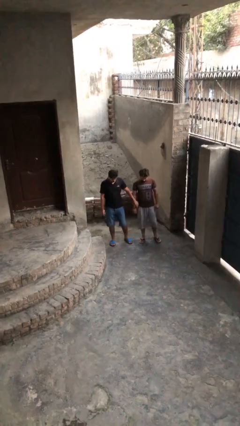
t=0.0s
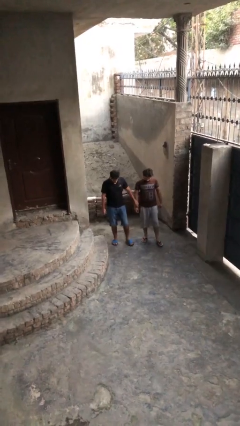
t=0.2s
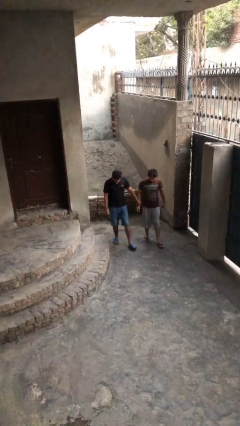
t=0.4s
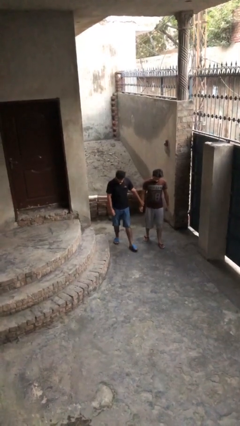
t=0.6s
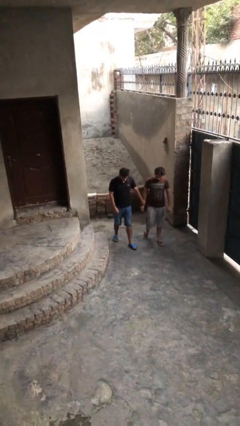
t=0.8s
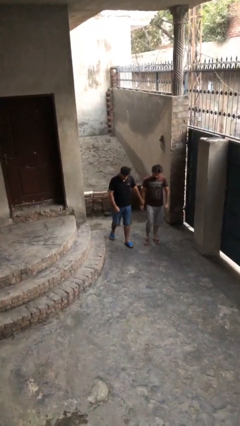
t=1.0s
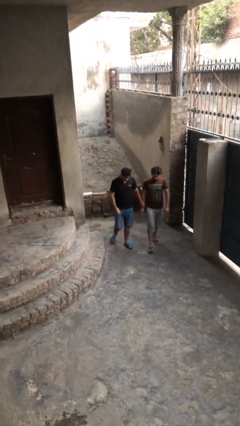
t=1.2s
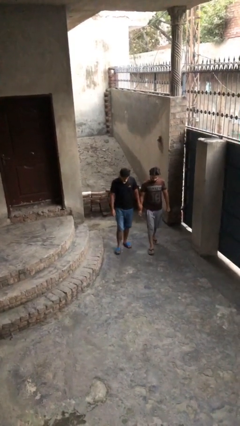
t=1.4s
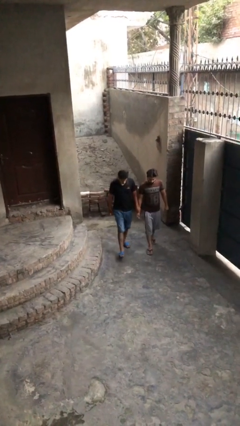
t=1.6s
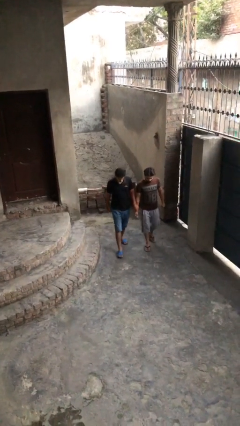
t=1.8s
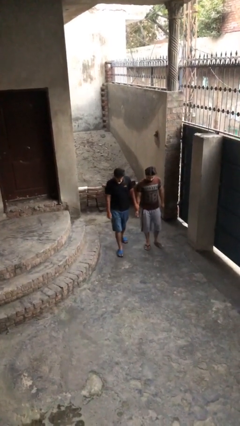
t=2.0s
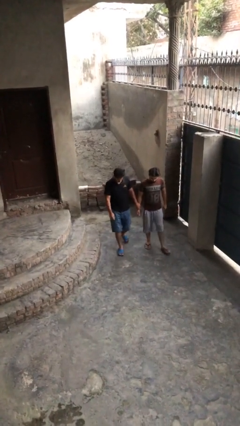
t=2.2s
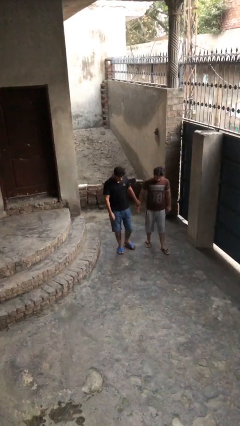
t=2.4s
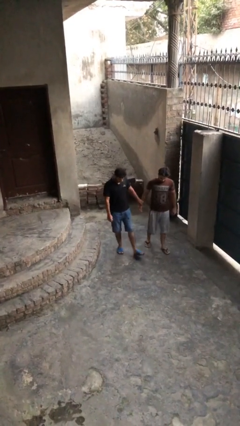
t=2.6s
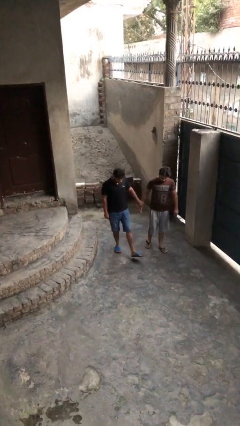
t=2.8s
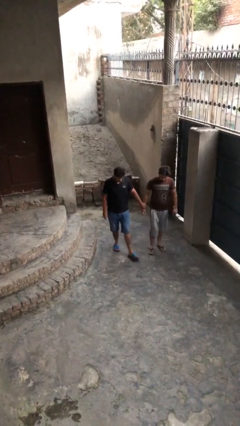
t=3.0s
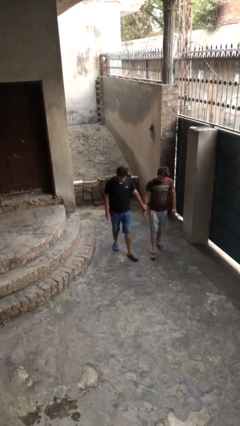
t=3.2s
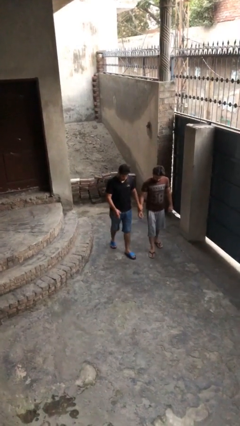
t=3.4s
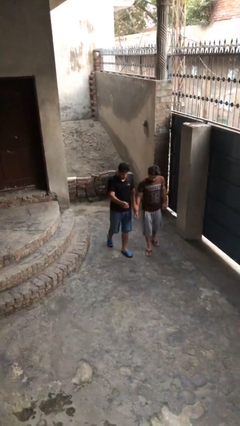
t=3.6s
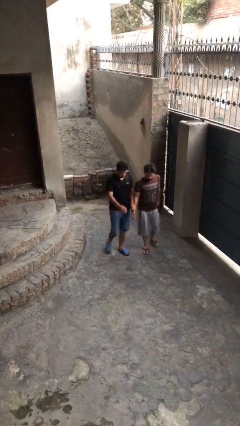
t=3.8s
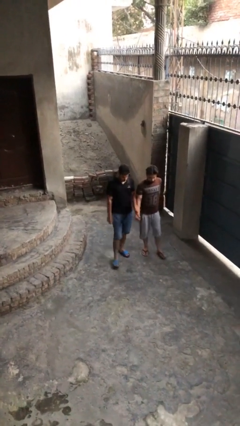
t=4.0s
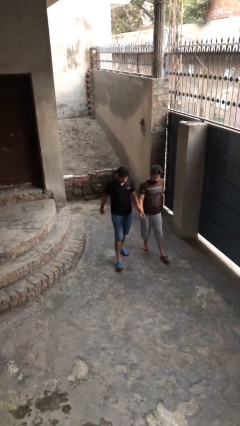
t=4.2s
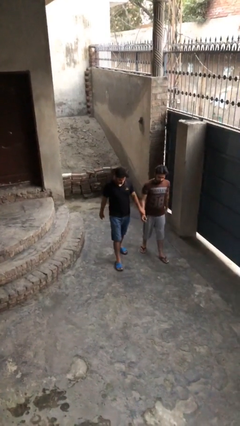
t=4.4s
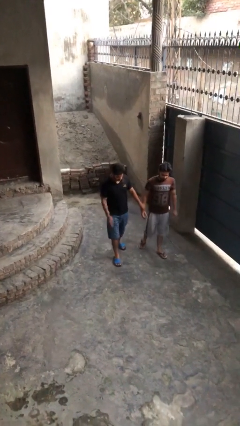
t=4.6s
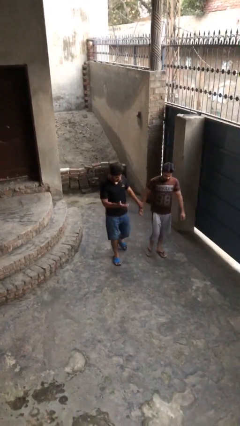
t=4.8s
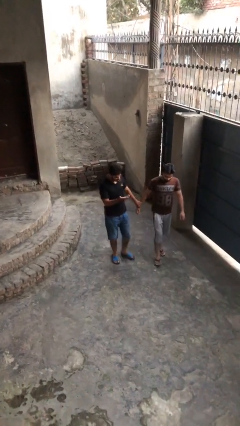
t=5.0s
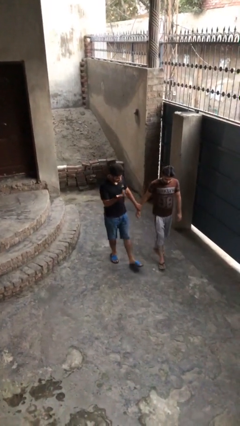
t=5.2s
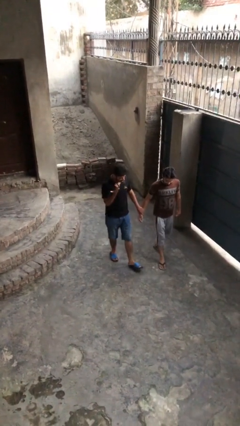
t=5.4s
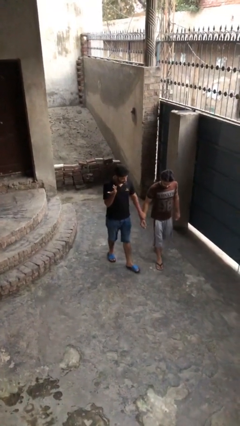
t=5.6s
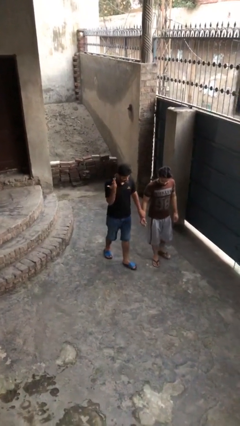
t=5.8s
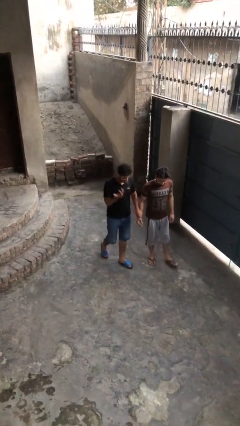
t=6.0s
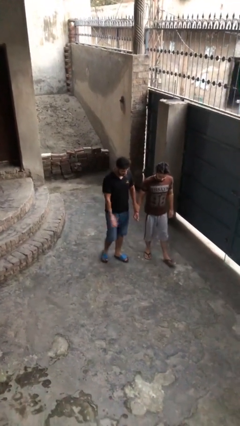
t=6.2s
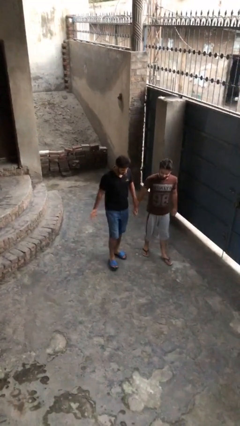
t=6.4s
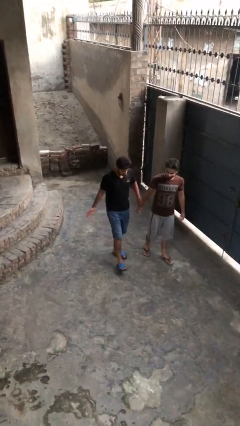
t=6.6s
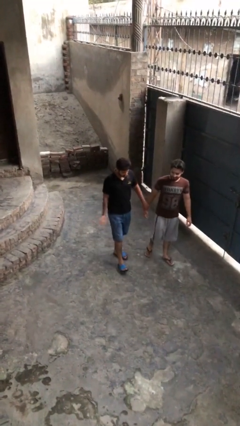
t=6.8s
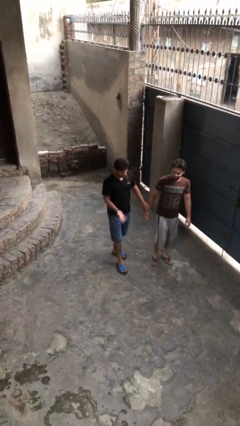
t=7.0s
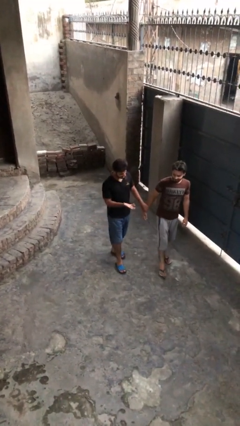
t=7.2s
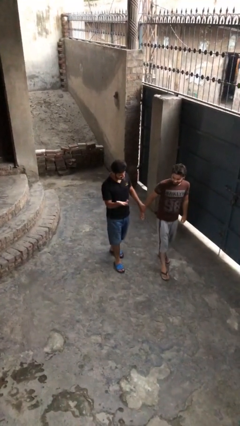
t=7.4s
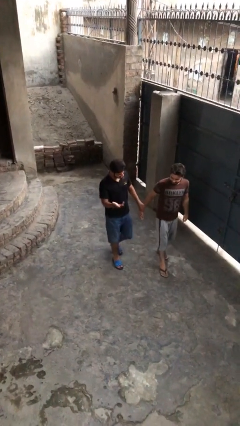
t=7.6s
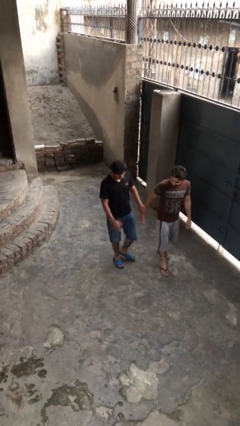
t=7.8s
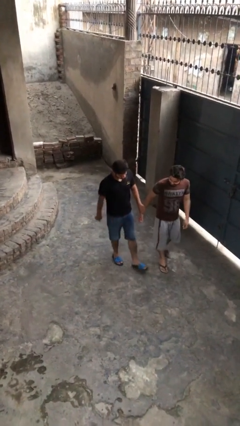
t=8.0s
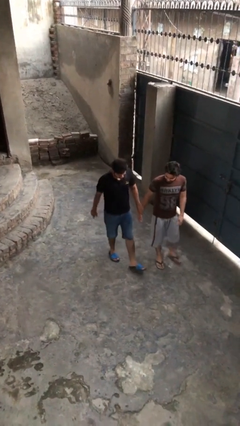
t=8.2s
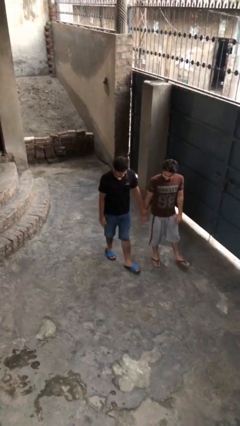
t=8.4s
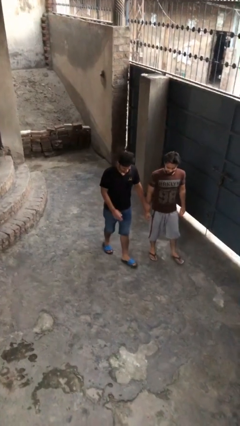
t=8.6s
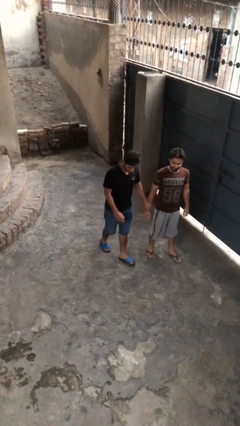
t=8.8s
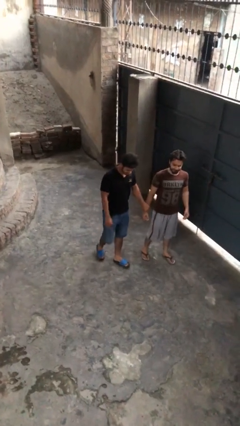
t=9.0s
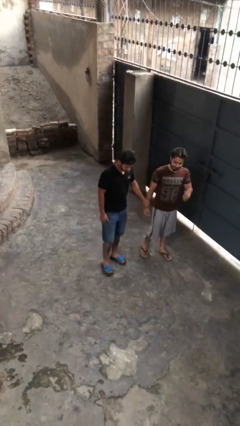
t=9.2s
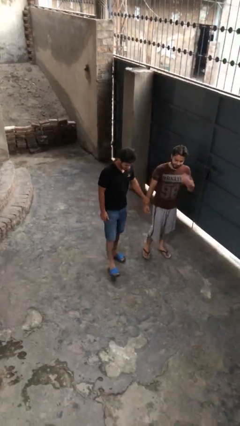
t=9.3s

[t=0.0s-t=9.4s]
person holds hand

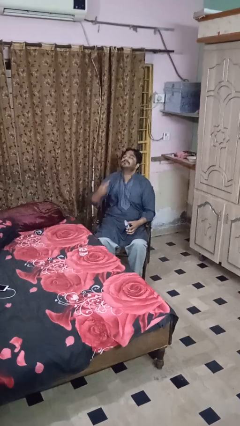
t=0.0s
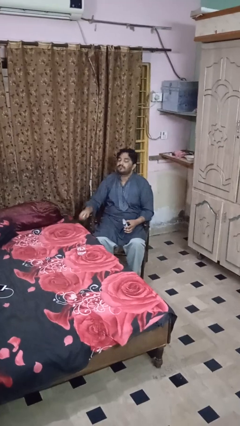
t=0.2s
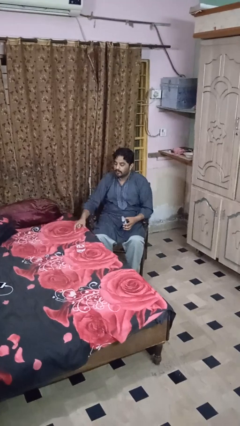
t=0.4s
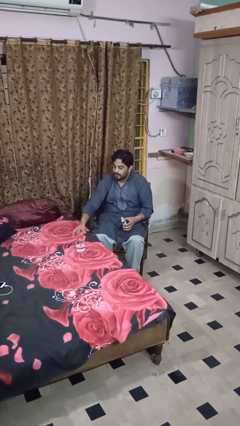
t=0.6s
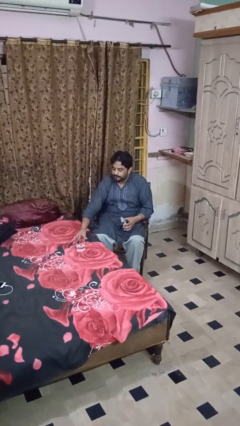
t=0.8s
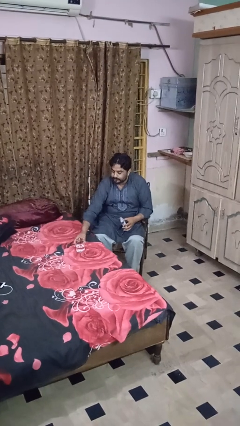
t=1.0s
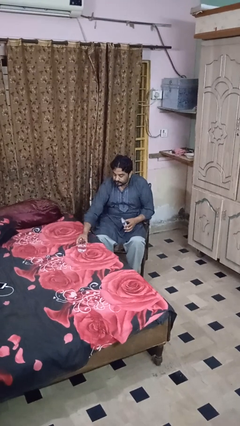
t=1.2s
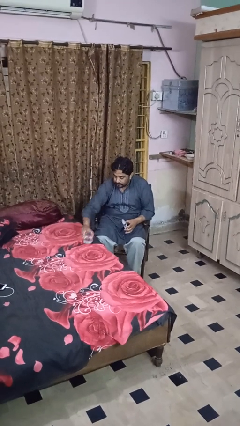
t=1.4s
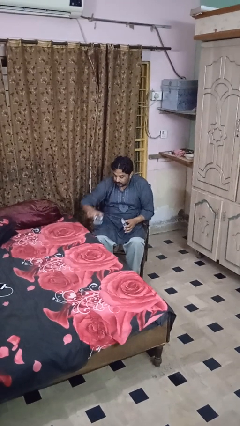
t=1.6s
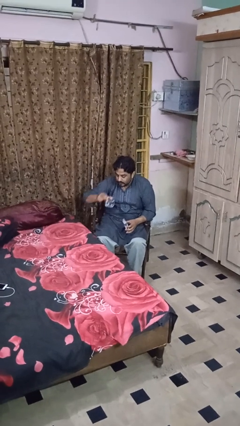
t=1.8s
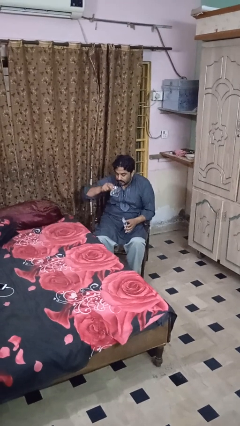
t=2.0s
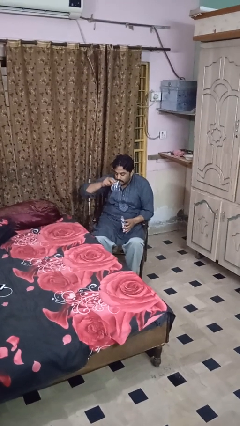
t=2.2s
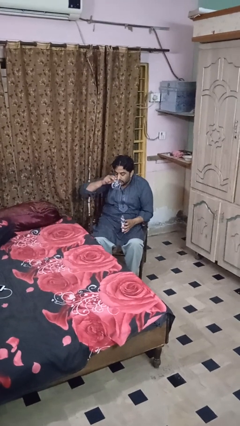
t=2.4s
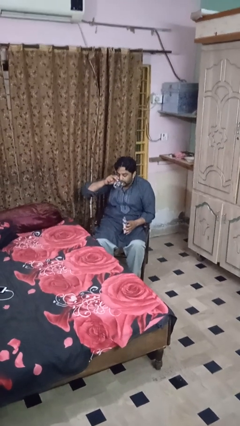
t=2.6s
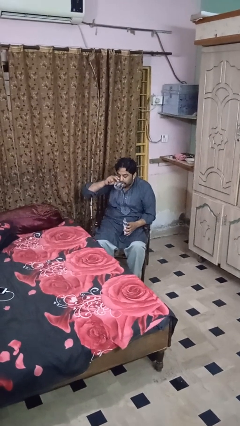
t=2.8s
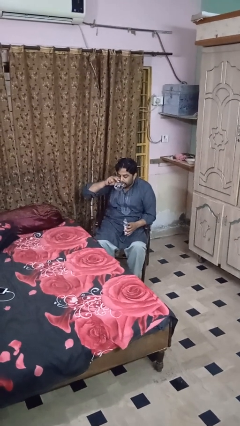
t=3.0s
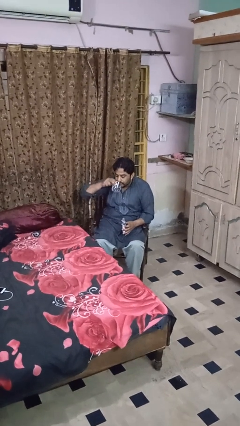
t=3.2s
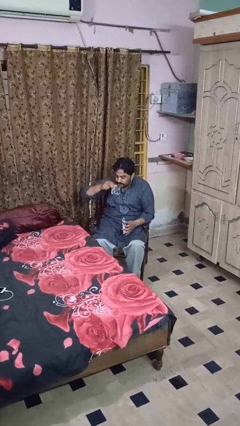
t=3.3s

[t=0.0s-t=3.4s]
person drinks from cup

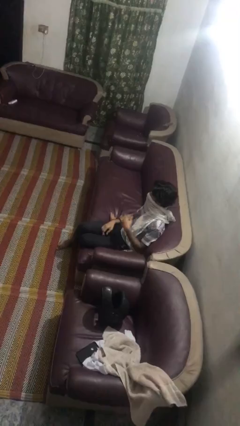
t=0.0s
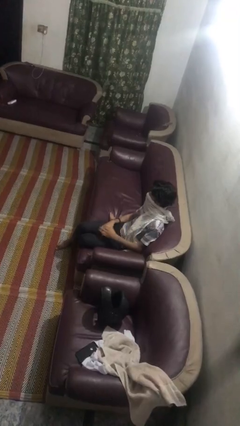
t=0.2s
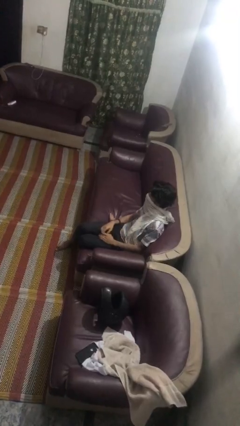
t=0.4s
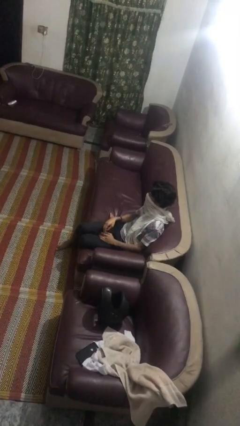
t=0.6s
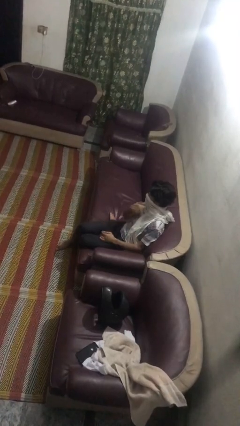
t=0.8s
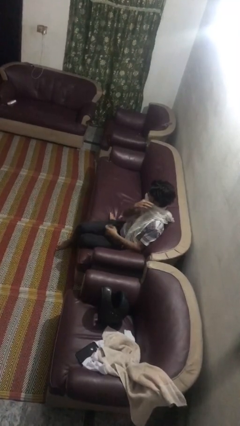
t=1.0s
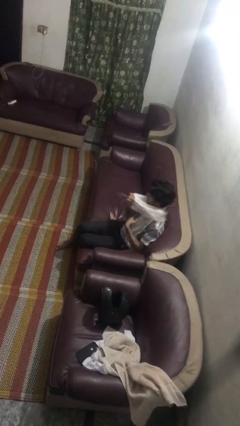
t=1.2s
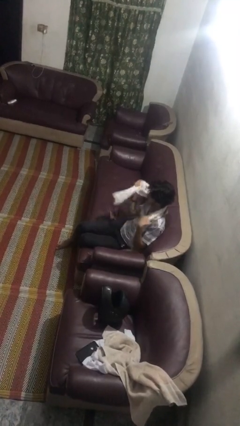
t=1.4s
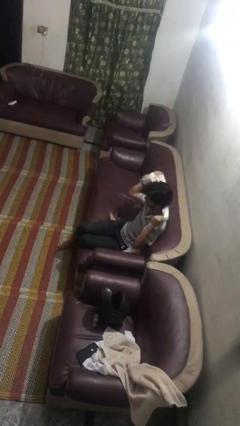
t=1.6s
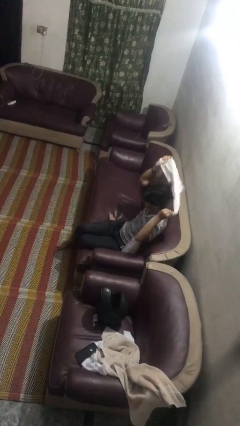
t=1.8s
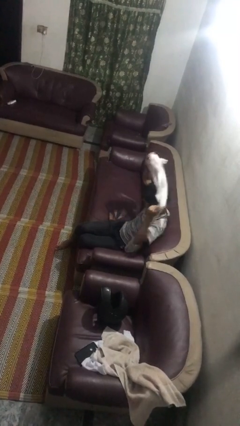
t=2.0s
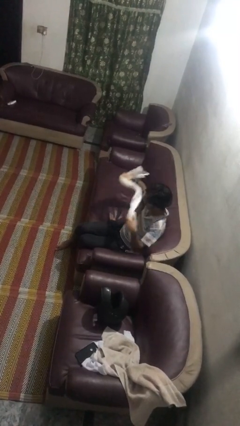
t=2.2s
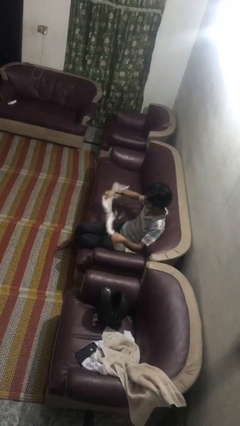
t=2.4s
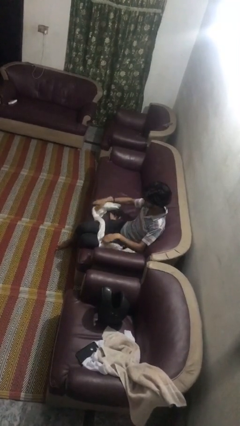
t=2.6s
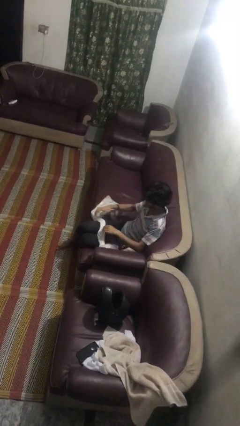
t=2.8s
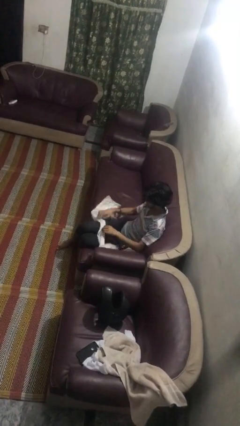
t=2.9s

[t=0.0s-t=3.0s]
person takes off scarf

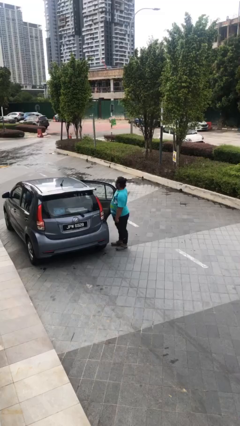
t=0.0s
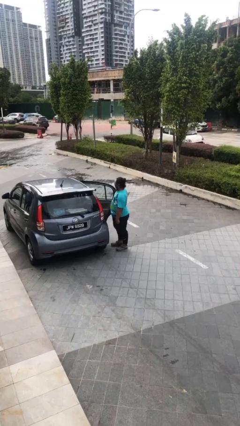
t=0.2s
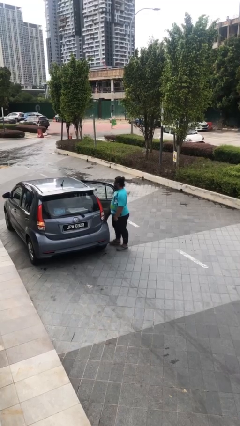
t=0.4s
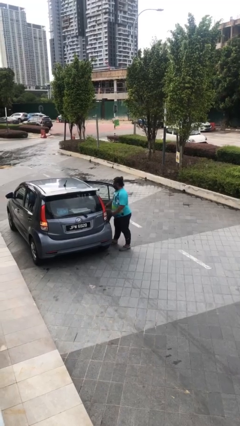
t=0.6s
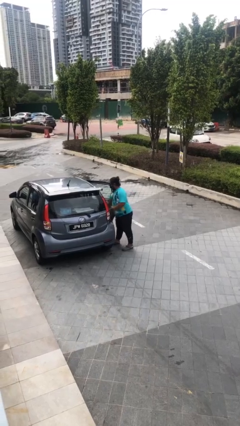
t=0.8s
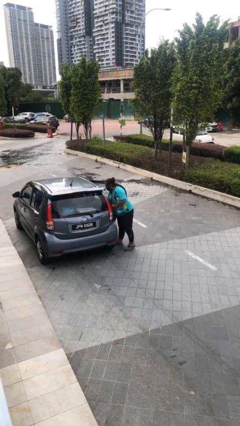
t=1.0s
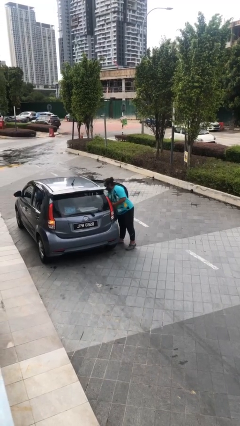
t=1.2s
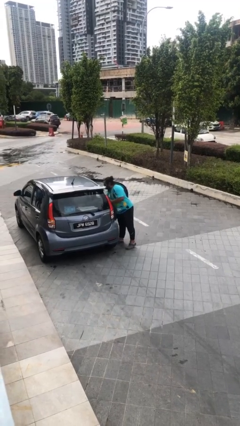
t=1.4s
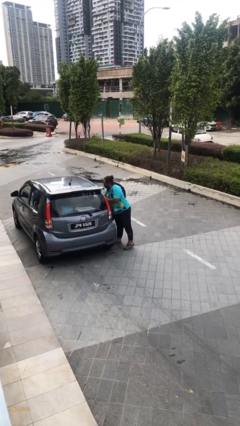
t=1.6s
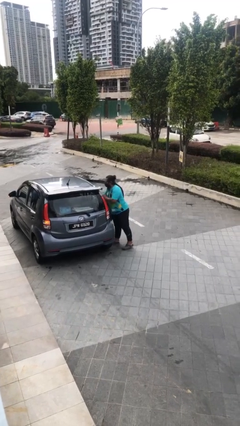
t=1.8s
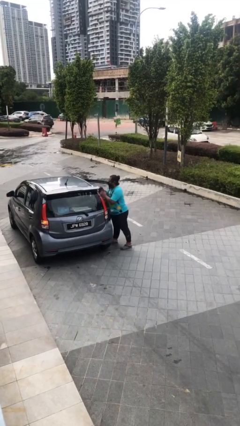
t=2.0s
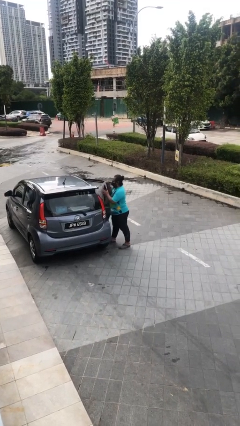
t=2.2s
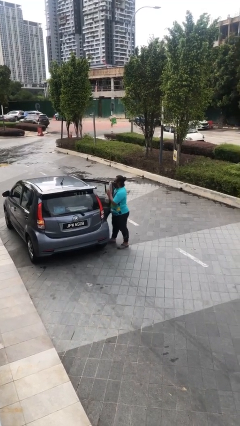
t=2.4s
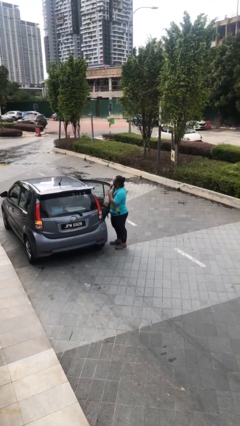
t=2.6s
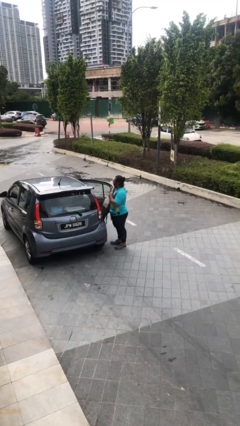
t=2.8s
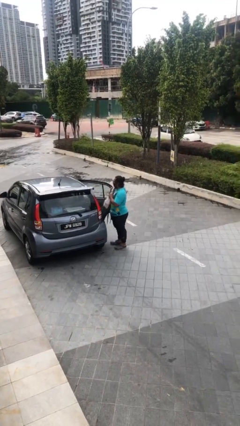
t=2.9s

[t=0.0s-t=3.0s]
person unloads car
